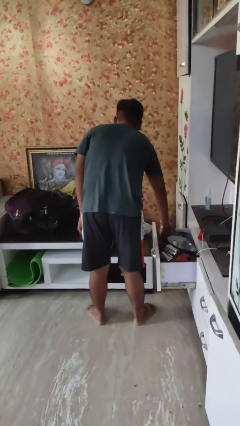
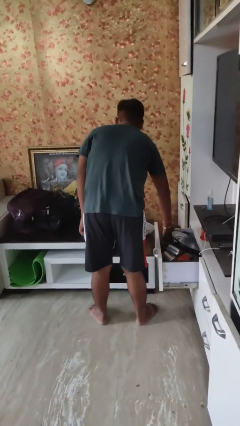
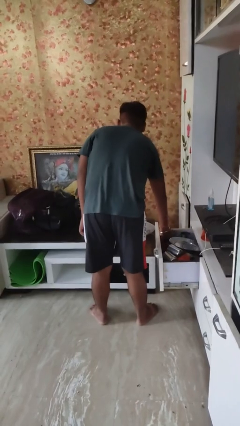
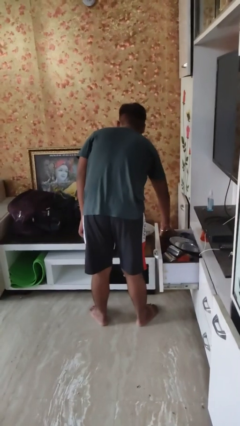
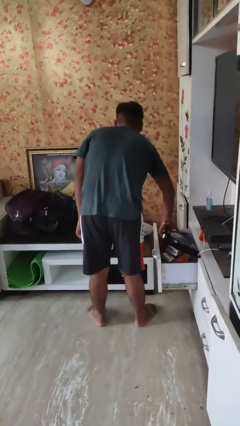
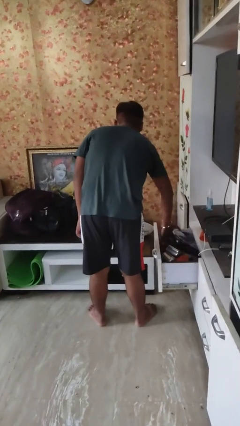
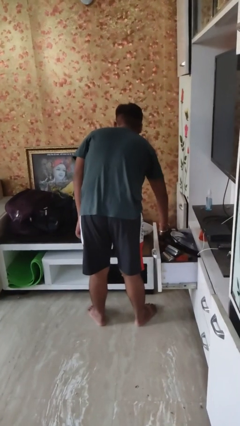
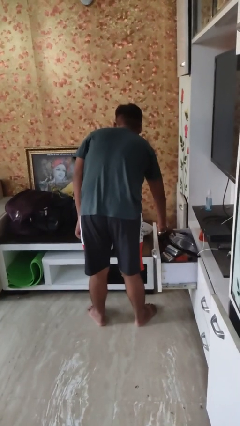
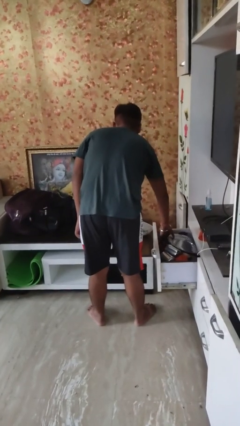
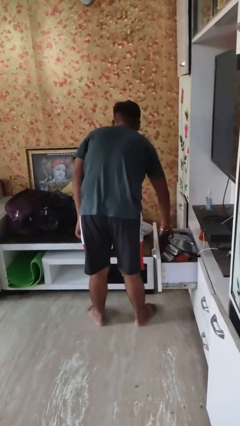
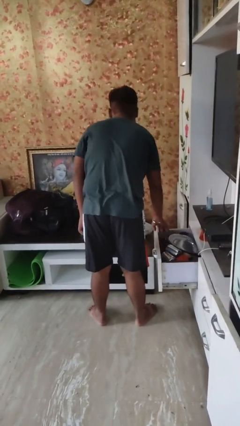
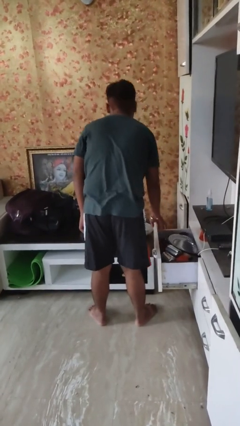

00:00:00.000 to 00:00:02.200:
person searches in kitchen drawer

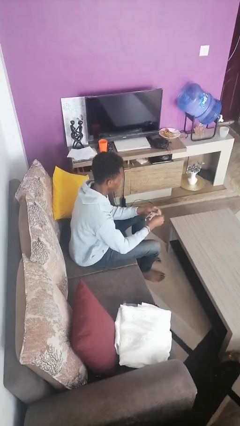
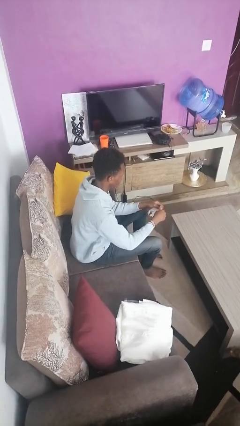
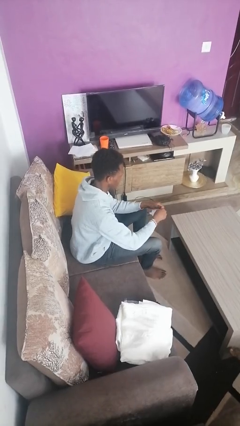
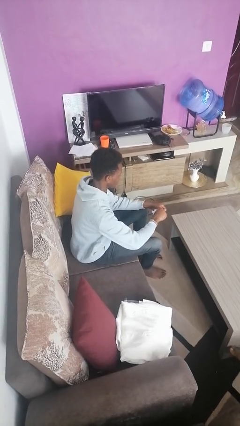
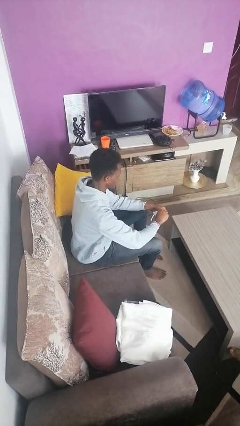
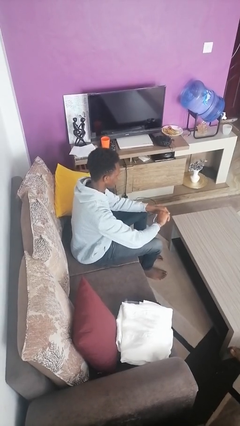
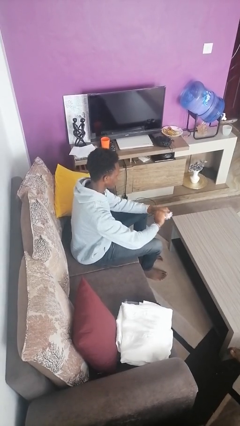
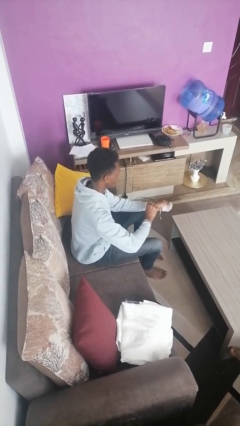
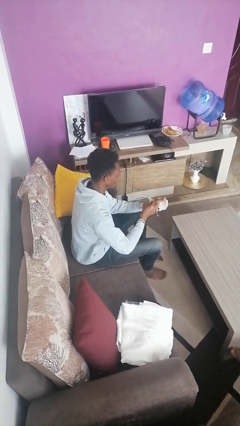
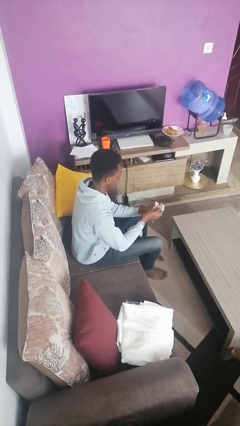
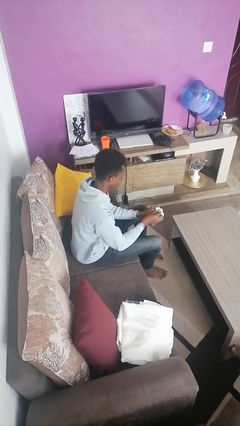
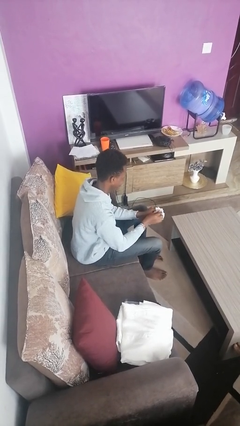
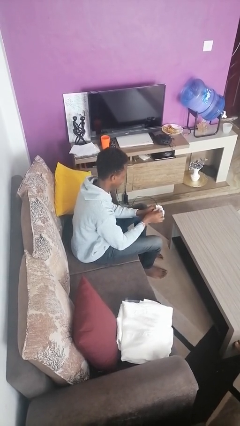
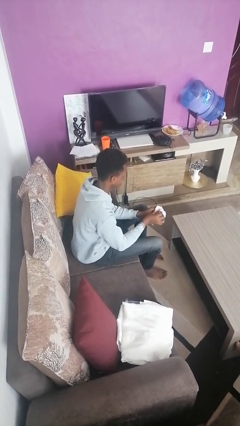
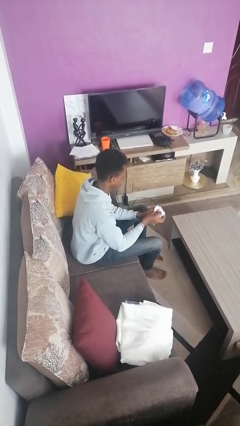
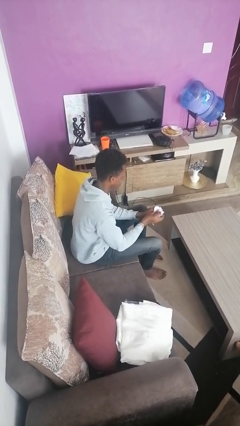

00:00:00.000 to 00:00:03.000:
person tears paper

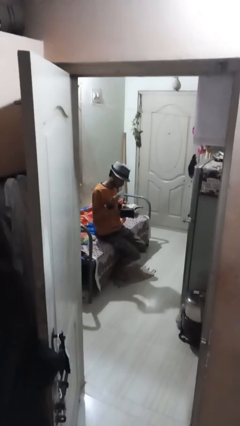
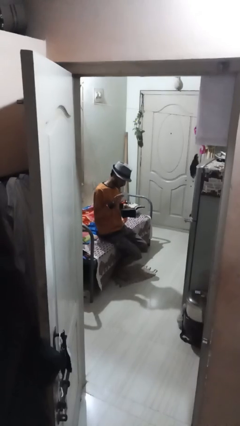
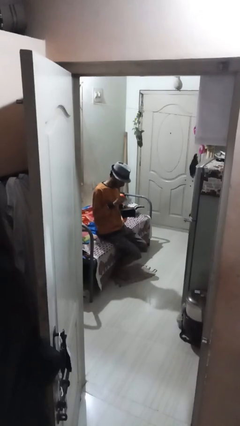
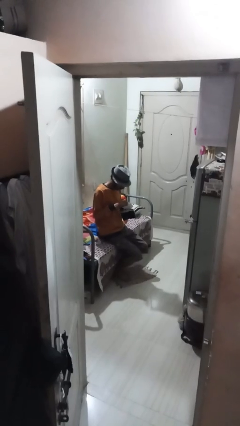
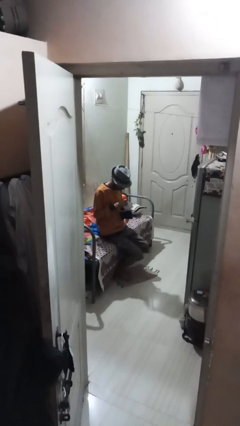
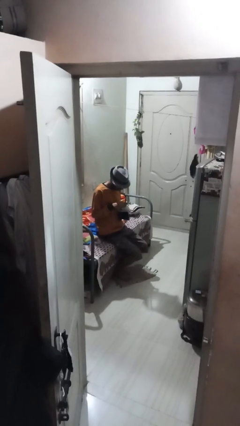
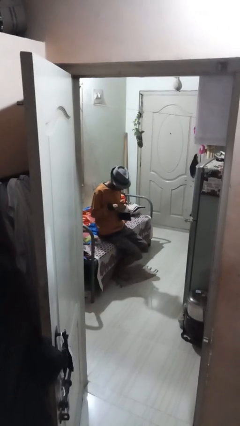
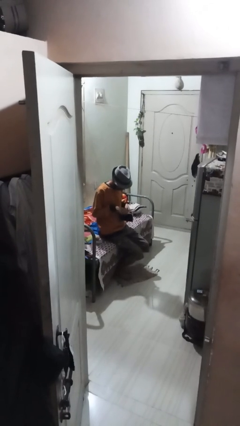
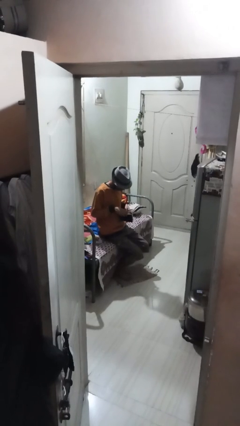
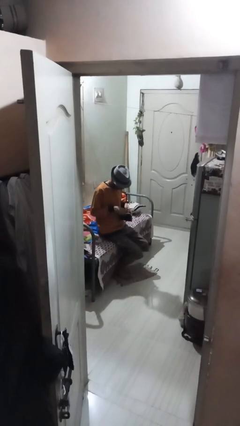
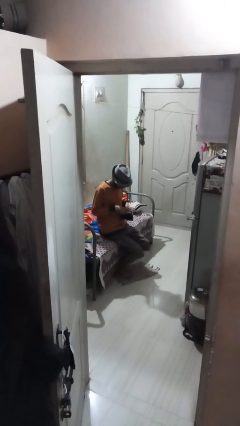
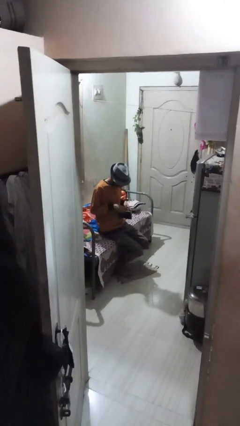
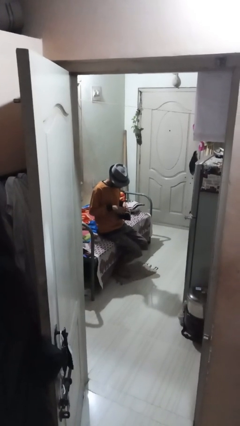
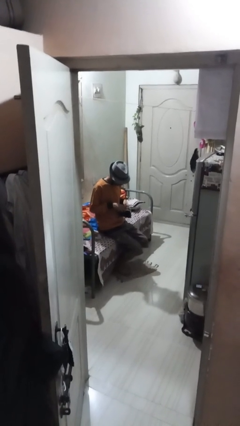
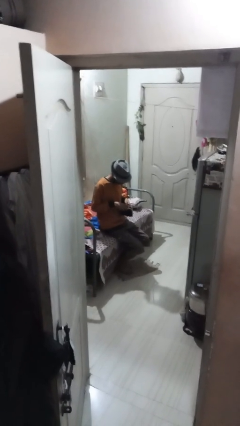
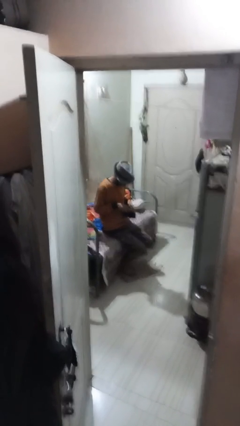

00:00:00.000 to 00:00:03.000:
person puts object into purse

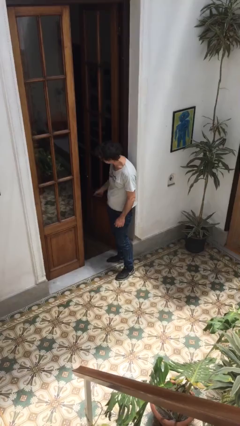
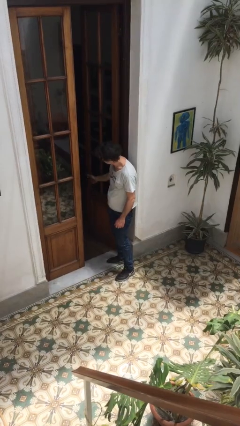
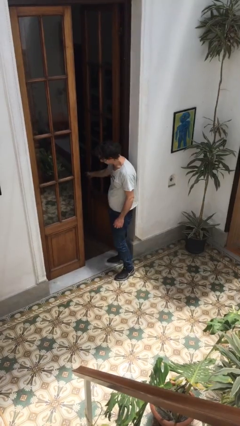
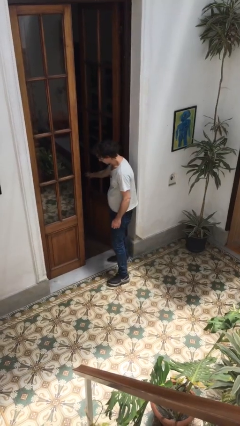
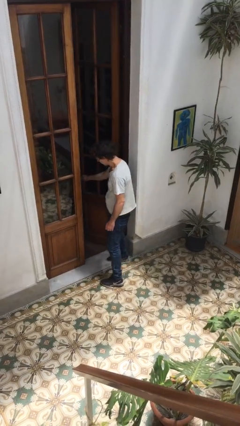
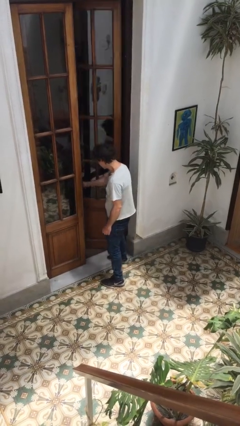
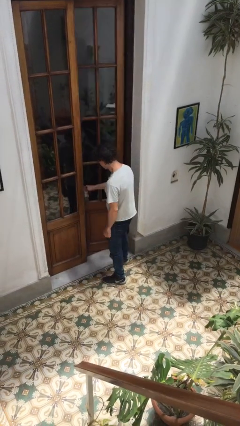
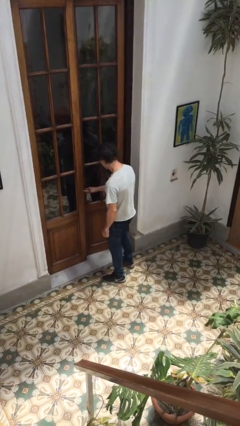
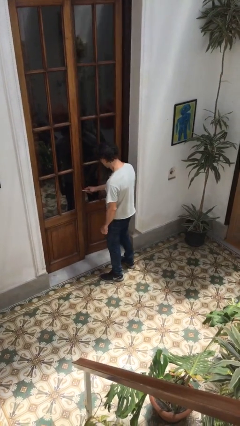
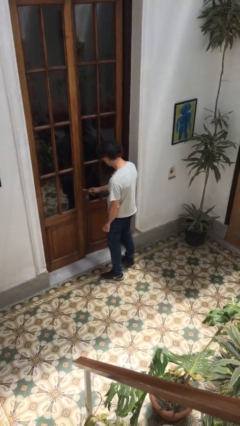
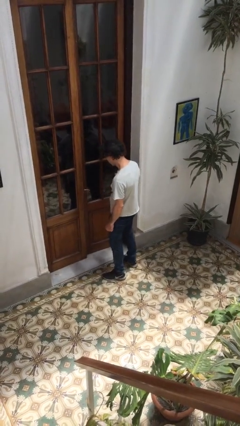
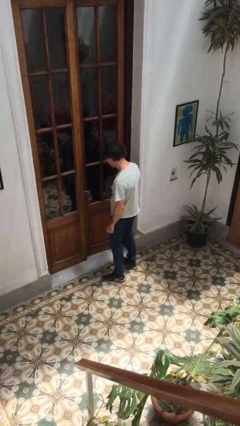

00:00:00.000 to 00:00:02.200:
person closes facility door

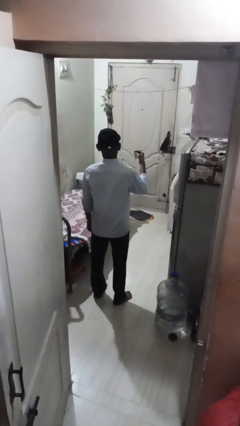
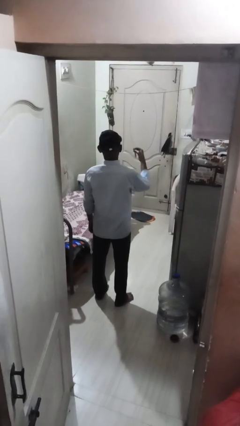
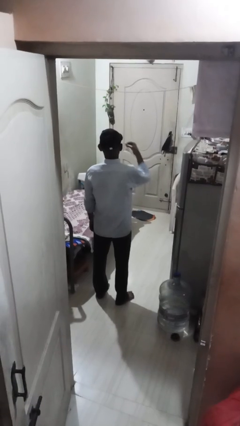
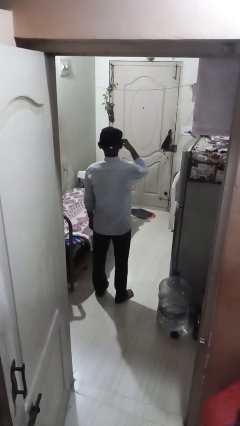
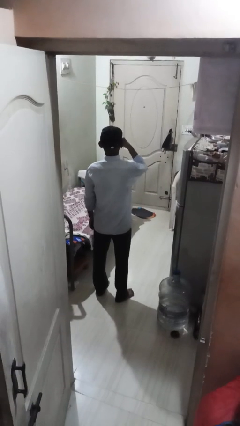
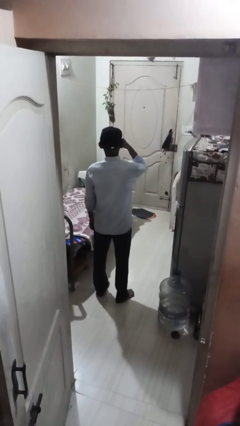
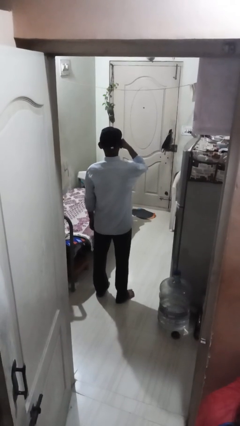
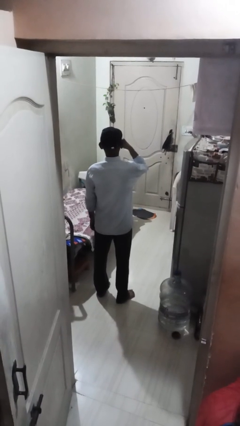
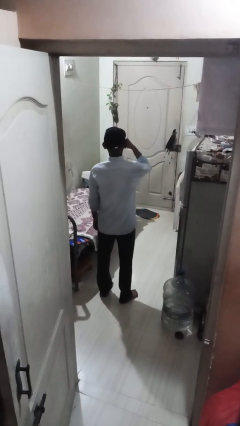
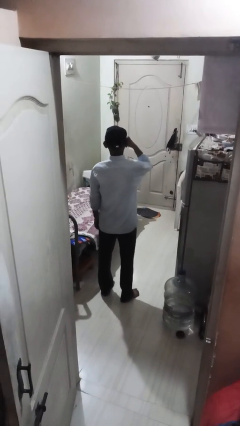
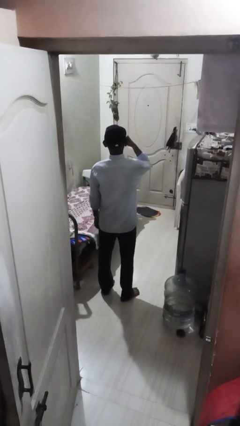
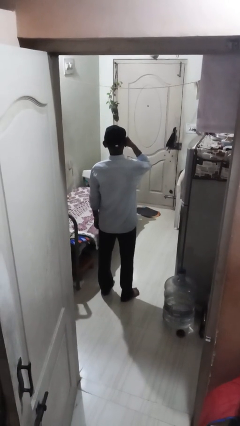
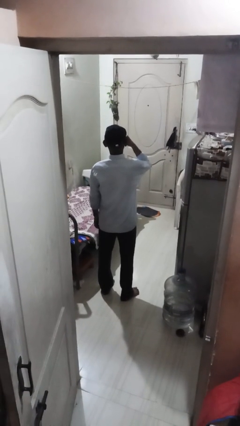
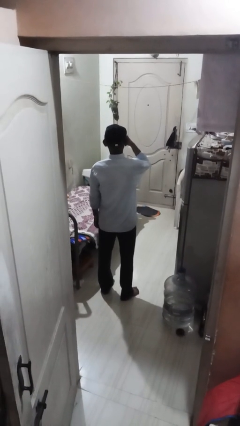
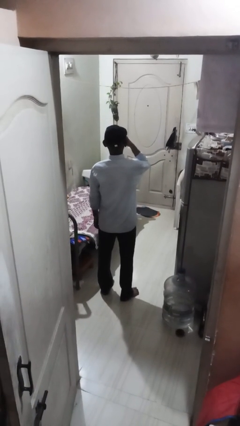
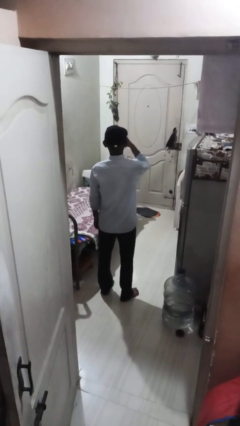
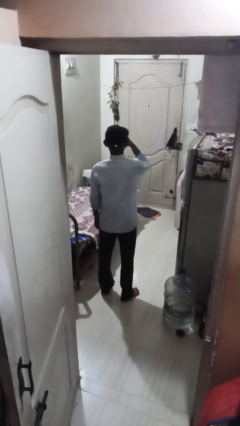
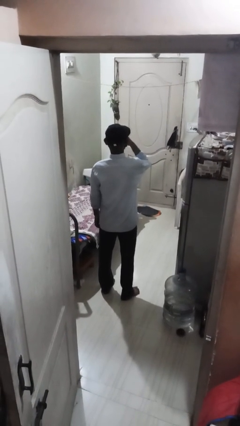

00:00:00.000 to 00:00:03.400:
person flosses

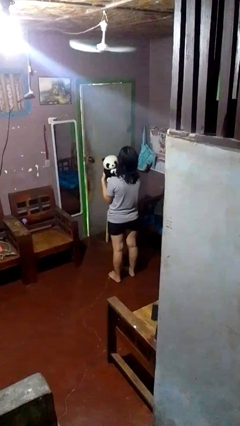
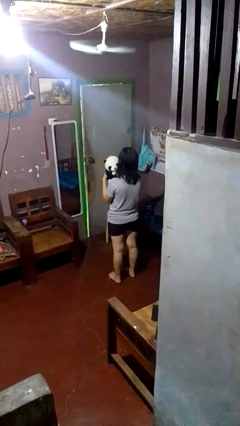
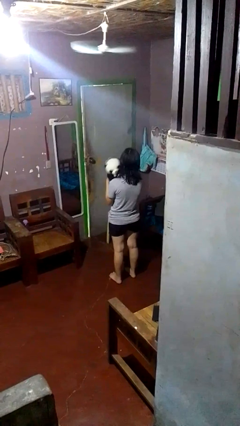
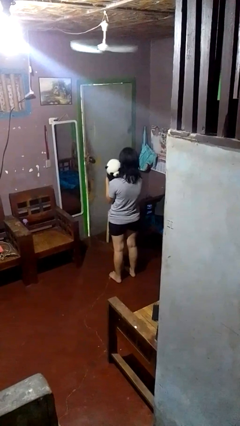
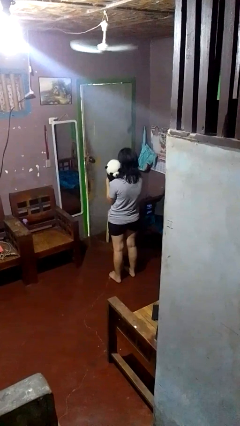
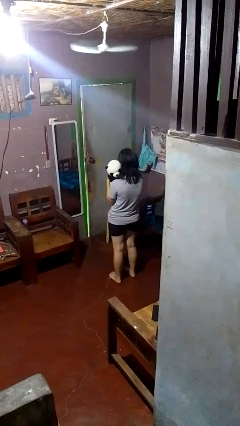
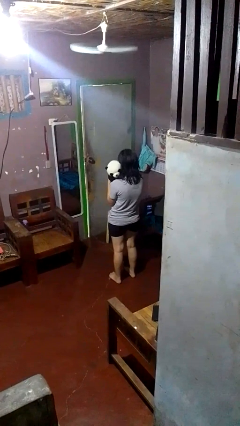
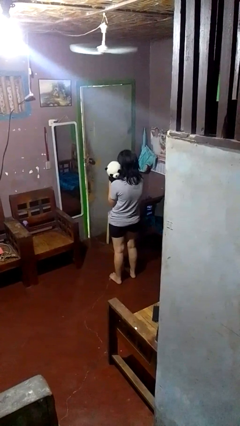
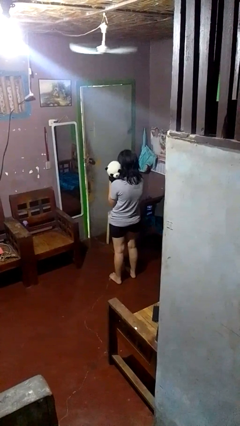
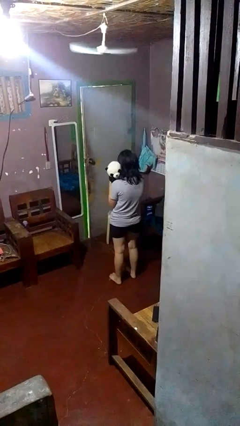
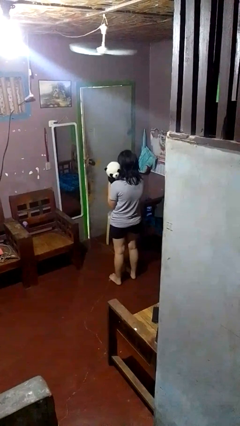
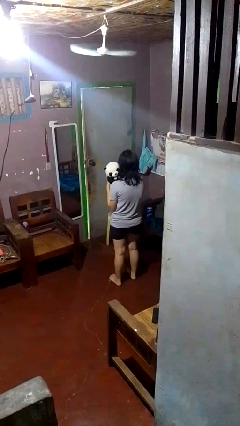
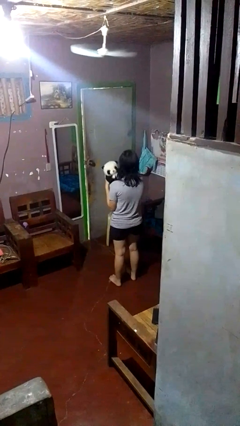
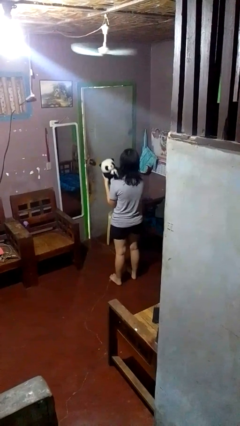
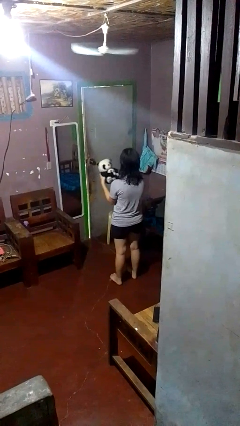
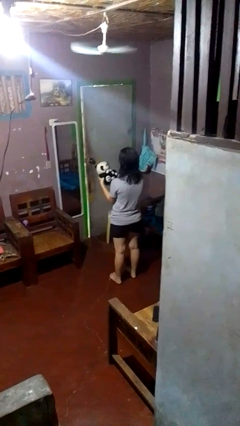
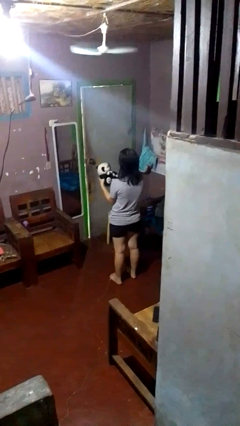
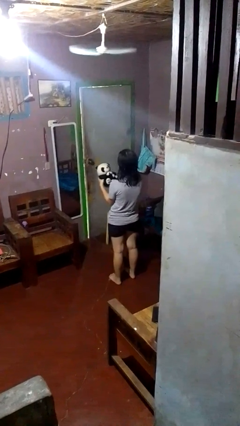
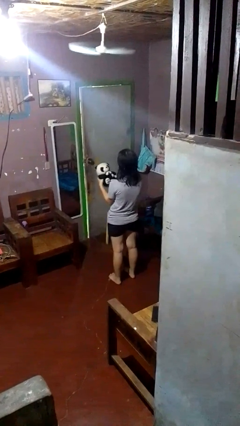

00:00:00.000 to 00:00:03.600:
person hugs stuffed animal
